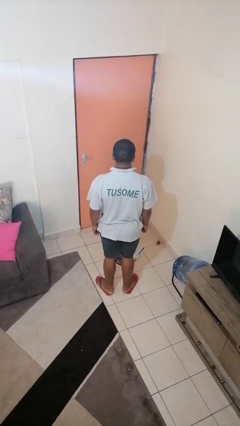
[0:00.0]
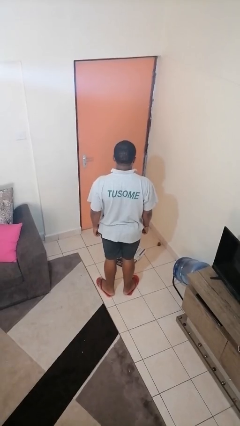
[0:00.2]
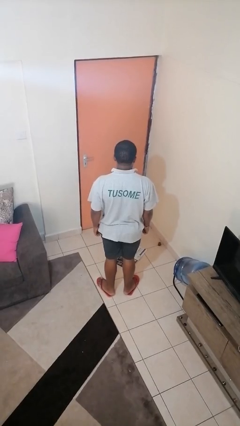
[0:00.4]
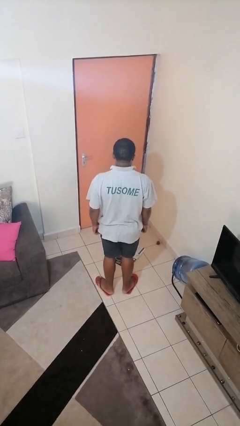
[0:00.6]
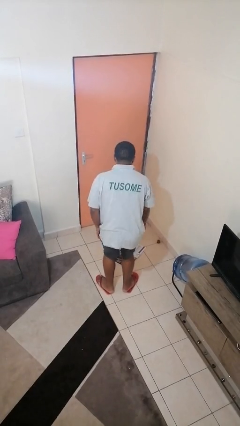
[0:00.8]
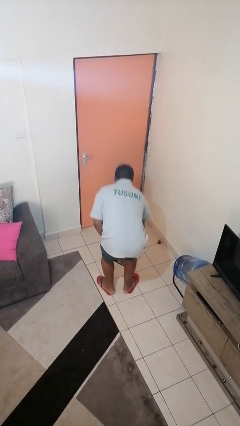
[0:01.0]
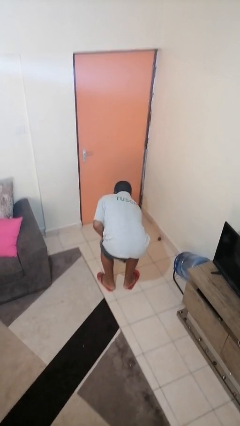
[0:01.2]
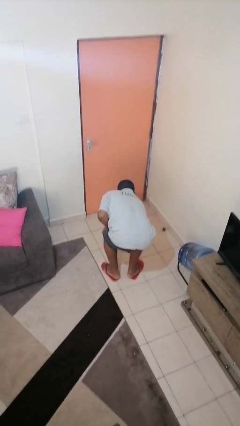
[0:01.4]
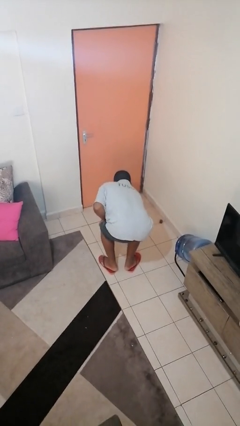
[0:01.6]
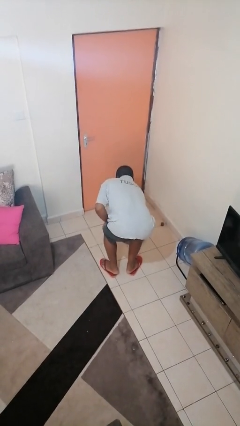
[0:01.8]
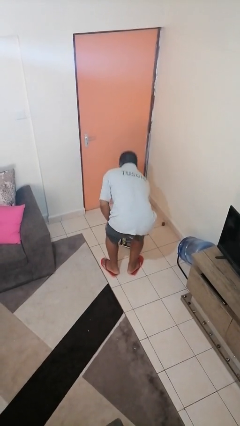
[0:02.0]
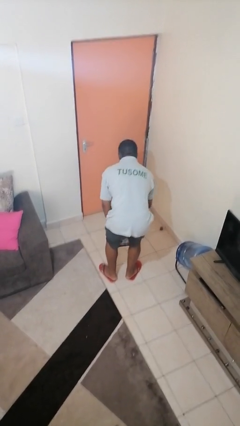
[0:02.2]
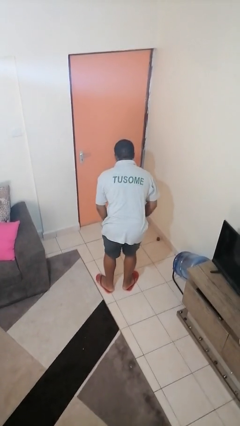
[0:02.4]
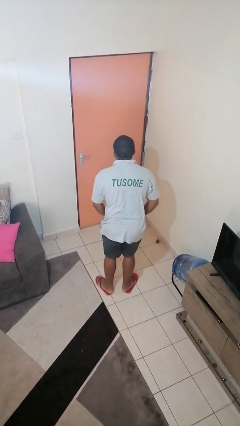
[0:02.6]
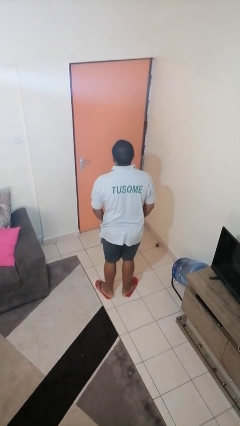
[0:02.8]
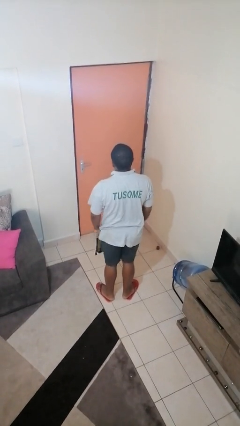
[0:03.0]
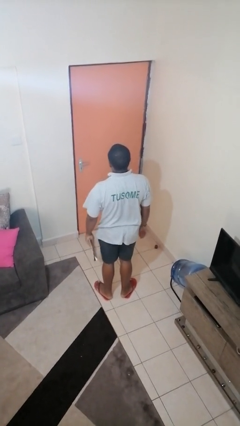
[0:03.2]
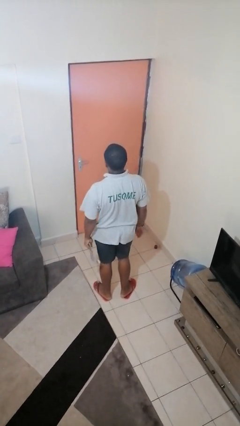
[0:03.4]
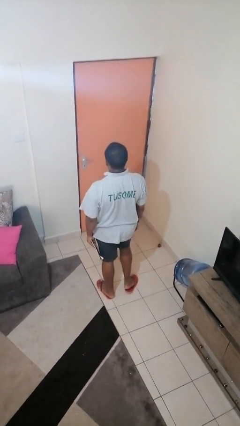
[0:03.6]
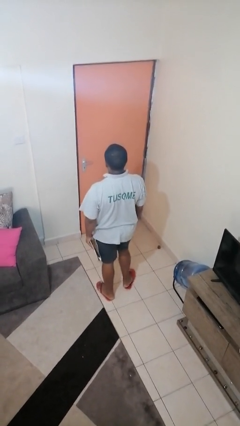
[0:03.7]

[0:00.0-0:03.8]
person picks up object from floor

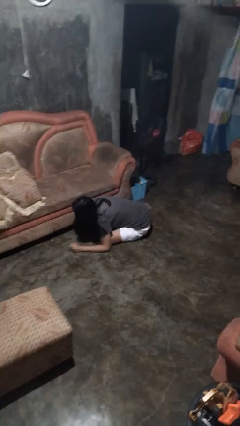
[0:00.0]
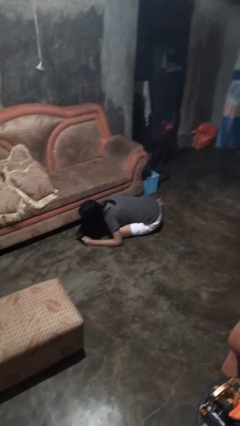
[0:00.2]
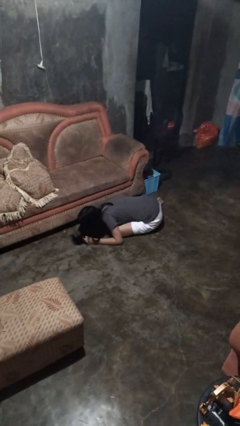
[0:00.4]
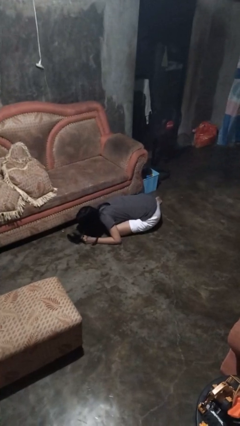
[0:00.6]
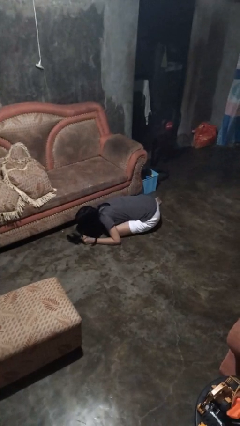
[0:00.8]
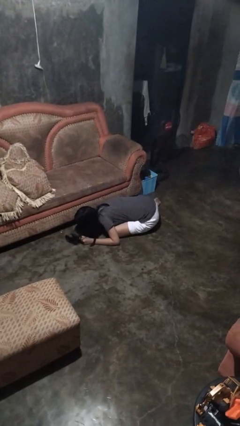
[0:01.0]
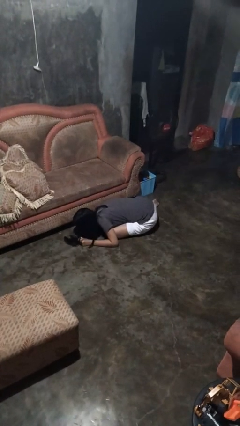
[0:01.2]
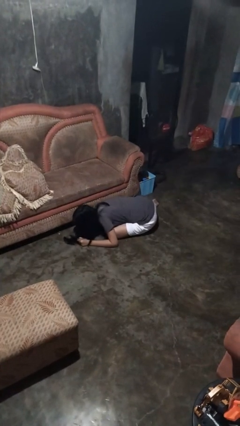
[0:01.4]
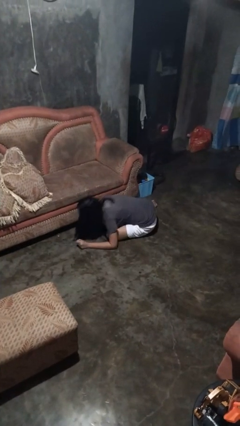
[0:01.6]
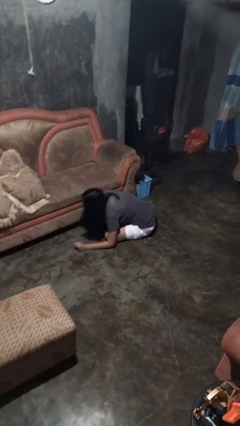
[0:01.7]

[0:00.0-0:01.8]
person searches under couch

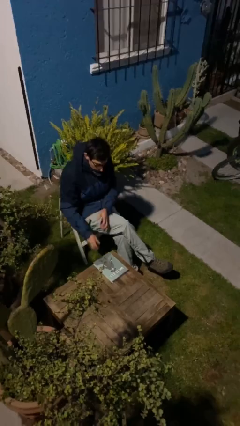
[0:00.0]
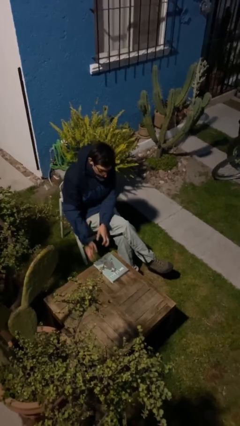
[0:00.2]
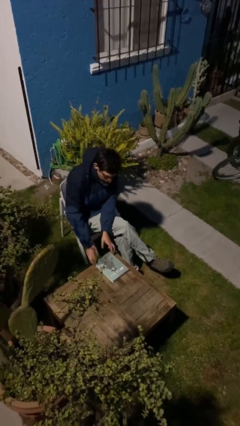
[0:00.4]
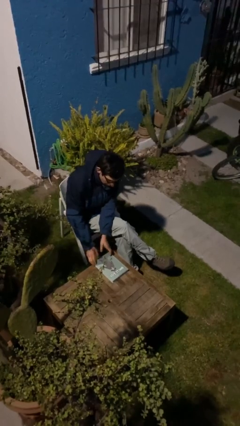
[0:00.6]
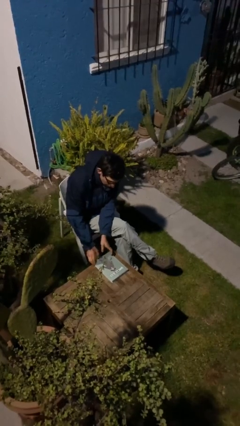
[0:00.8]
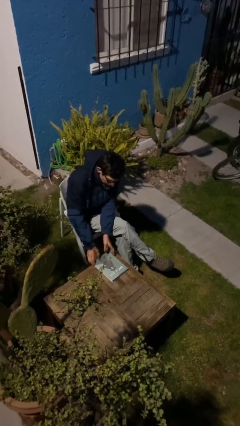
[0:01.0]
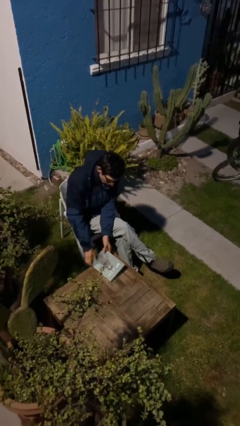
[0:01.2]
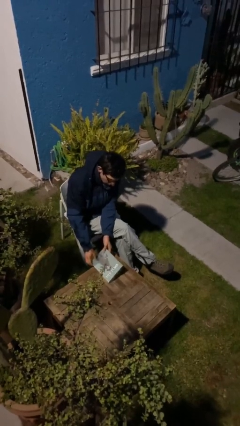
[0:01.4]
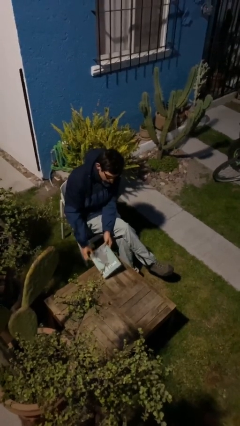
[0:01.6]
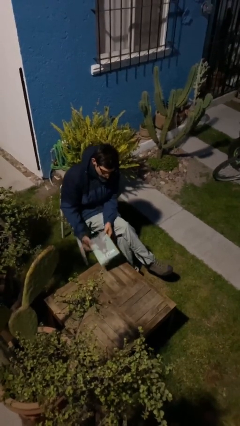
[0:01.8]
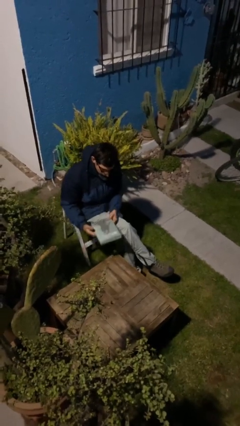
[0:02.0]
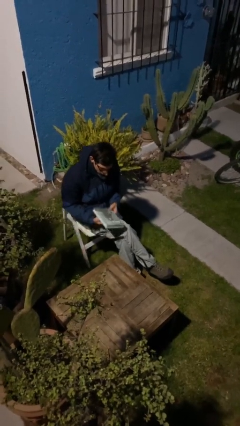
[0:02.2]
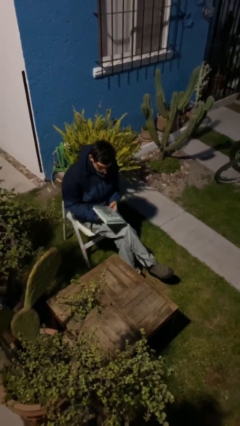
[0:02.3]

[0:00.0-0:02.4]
person picks up object from table

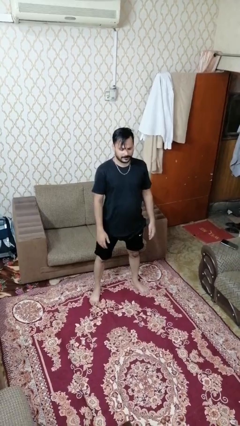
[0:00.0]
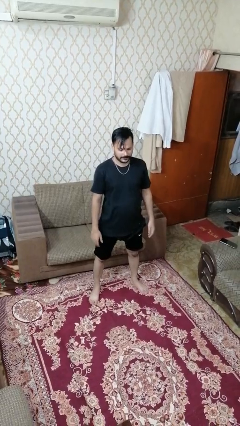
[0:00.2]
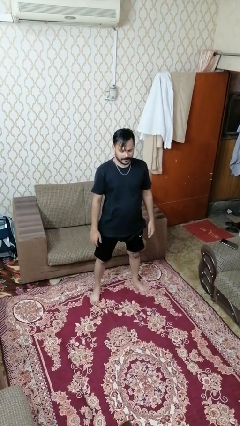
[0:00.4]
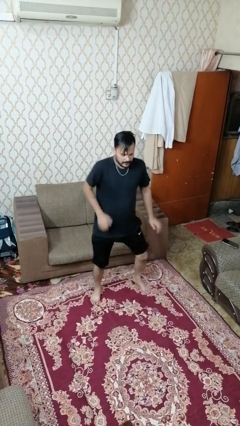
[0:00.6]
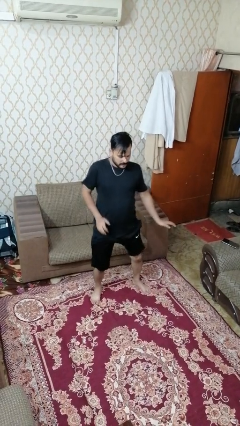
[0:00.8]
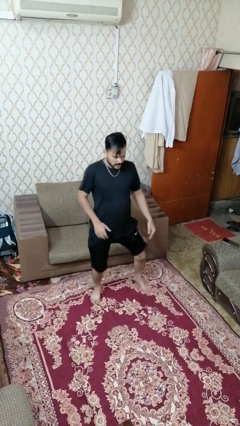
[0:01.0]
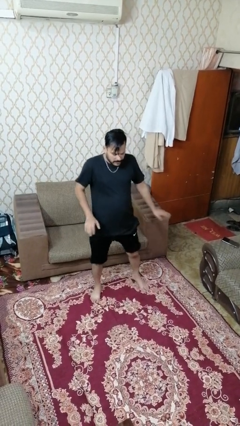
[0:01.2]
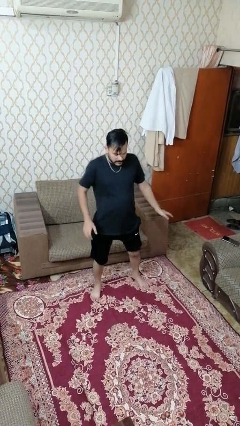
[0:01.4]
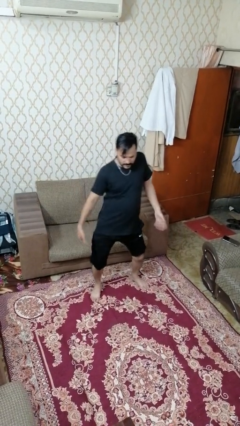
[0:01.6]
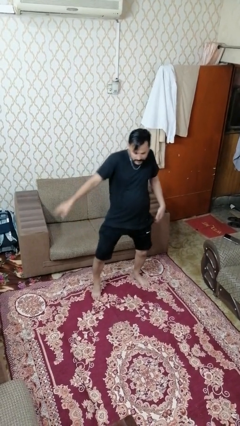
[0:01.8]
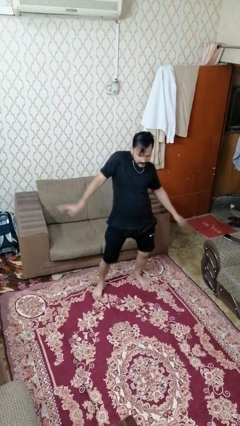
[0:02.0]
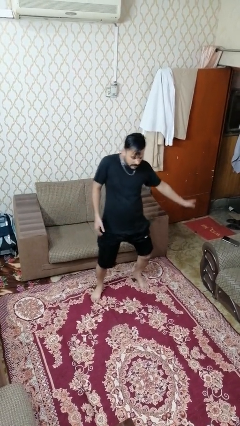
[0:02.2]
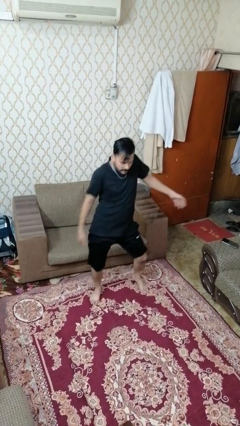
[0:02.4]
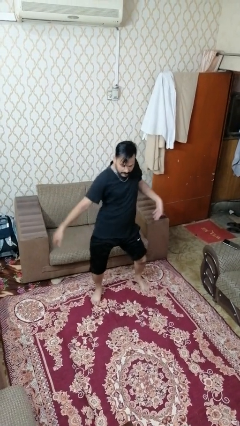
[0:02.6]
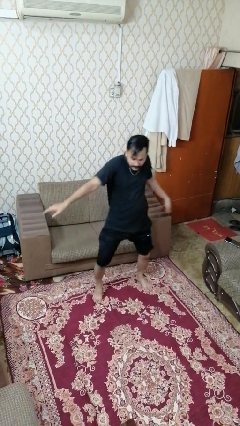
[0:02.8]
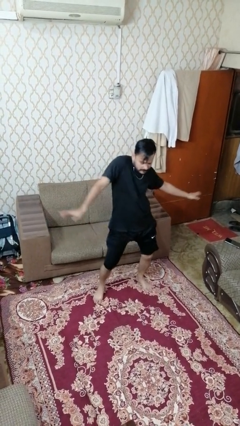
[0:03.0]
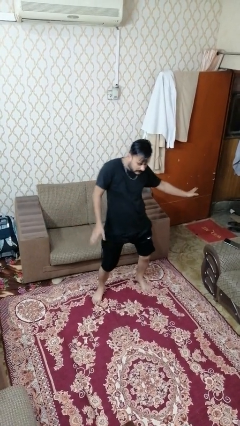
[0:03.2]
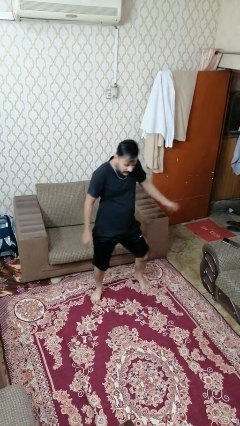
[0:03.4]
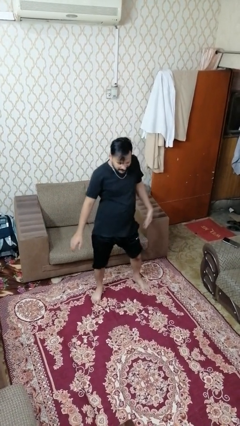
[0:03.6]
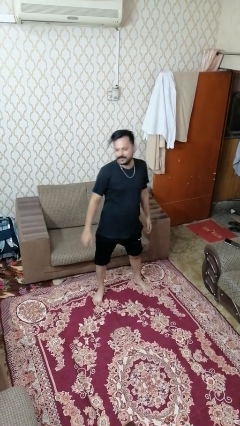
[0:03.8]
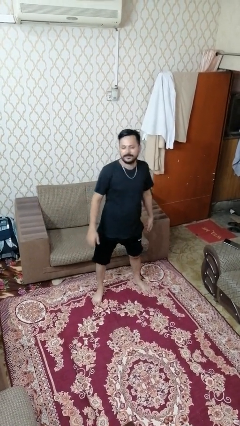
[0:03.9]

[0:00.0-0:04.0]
person dances in place

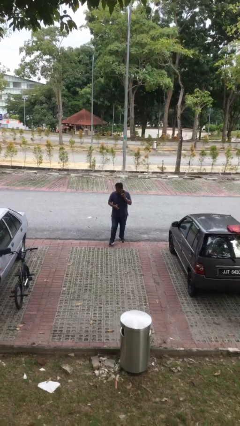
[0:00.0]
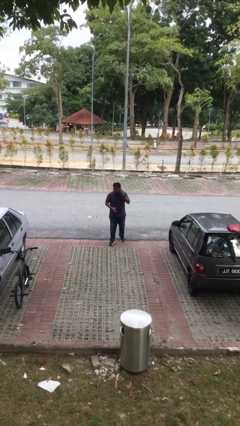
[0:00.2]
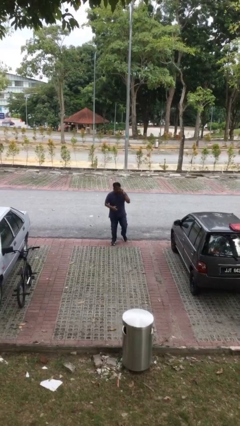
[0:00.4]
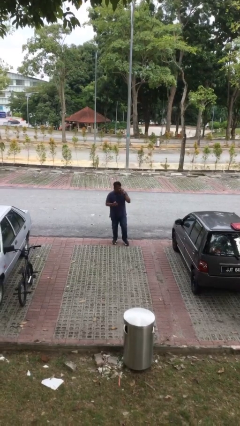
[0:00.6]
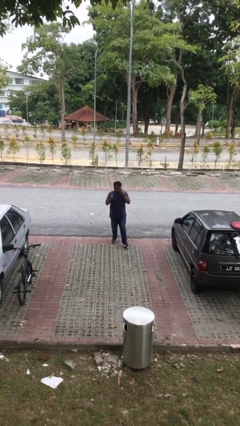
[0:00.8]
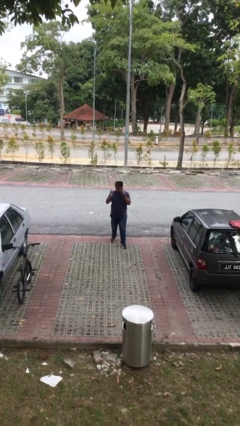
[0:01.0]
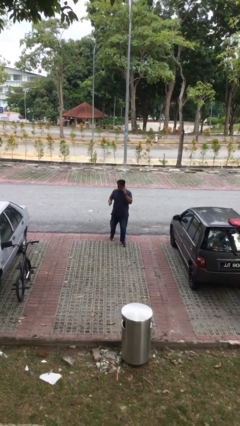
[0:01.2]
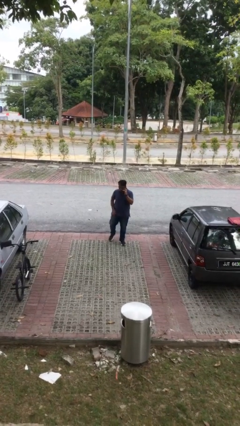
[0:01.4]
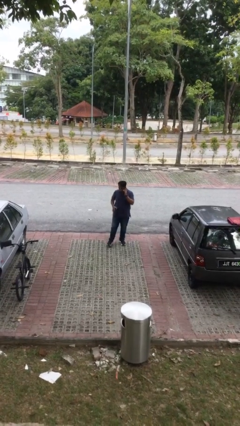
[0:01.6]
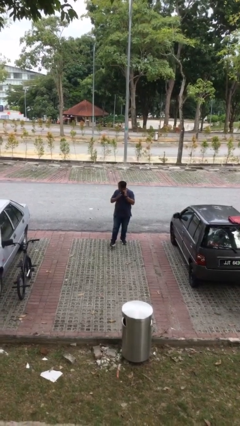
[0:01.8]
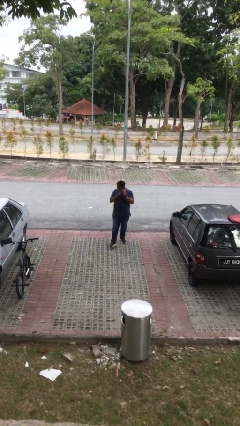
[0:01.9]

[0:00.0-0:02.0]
person talks on phone

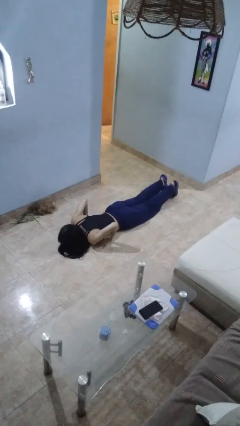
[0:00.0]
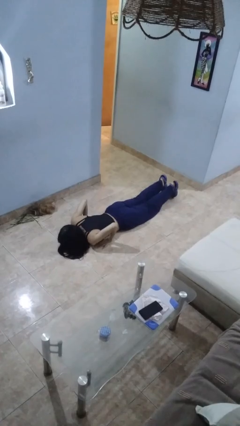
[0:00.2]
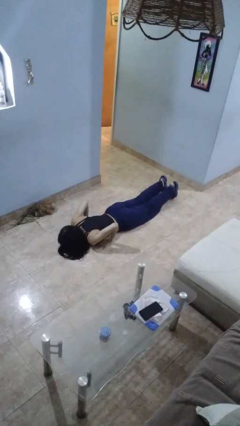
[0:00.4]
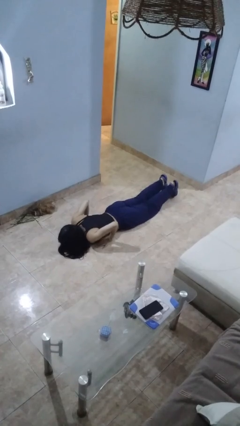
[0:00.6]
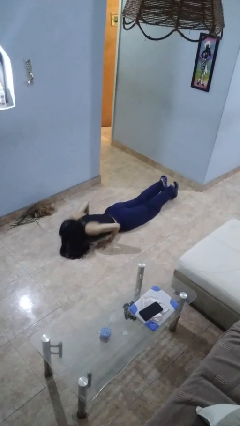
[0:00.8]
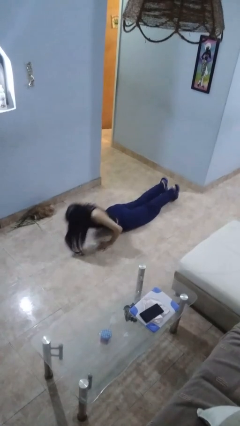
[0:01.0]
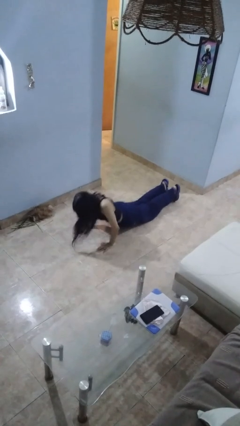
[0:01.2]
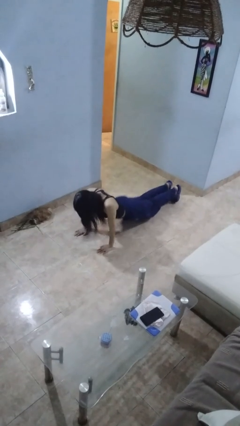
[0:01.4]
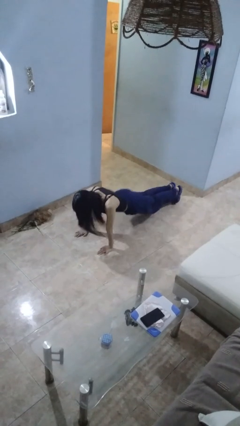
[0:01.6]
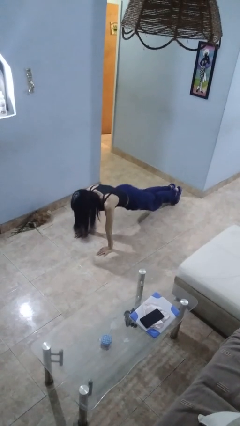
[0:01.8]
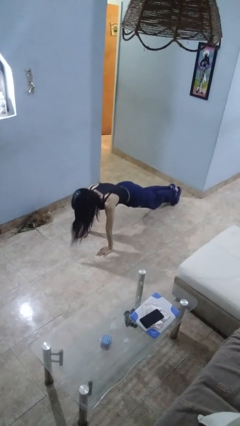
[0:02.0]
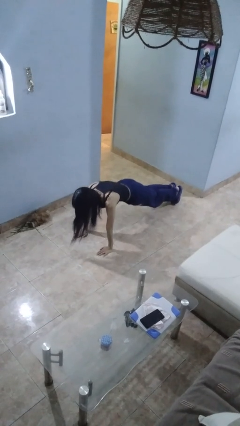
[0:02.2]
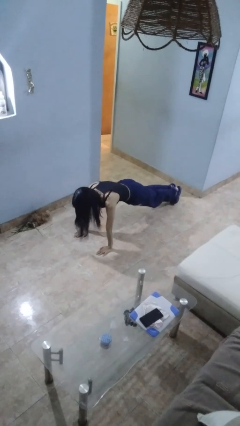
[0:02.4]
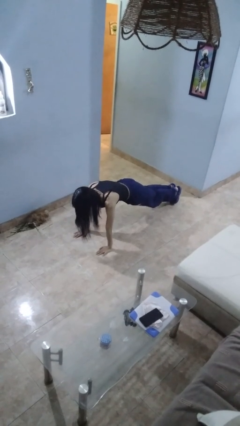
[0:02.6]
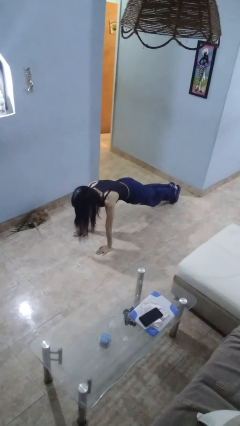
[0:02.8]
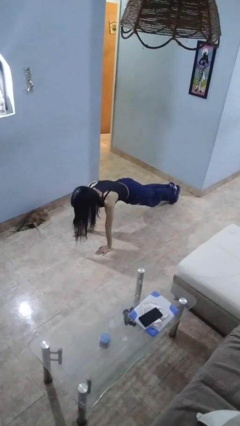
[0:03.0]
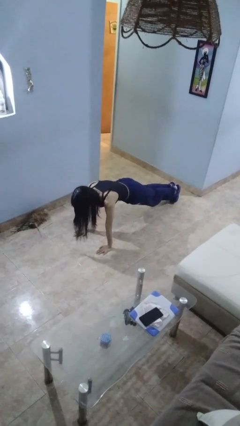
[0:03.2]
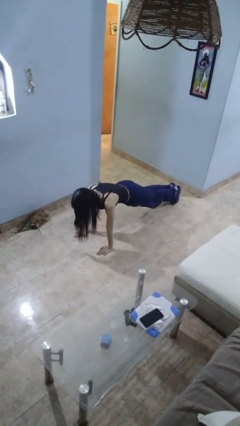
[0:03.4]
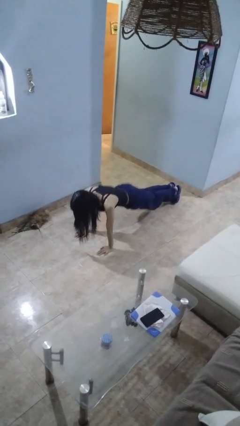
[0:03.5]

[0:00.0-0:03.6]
person exercises with pushup
